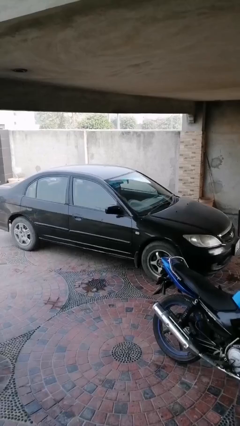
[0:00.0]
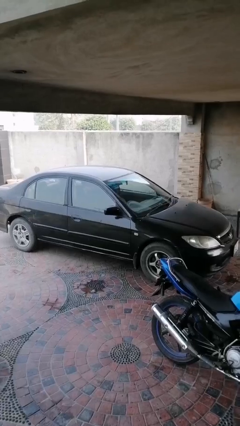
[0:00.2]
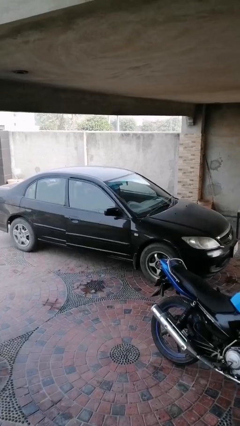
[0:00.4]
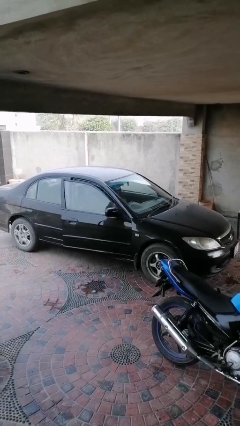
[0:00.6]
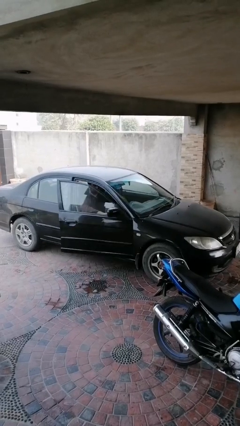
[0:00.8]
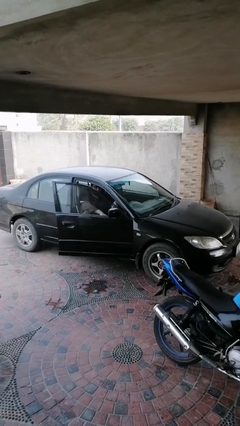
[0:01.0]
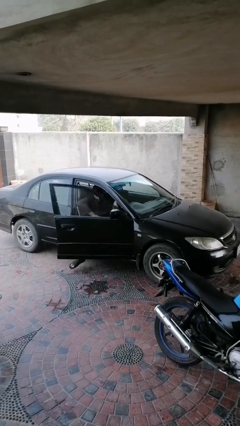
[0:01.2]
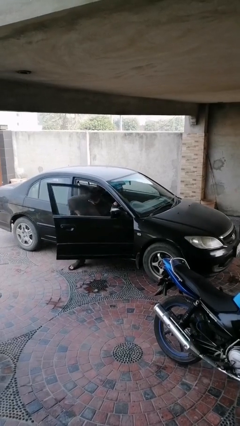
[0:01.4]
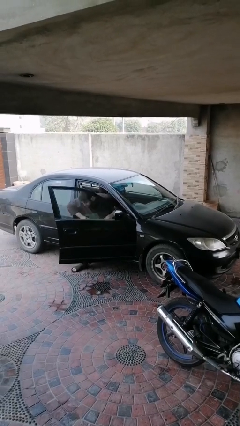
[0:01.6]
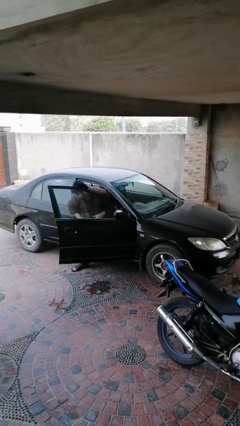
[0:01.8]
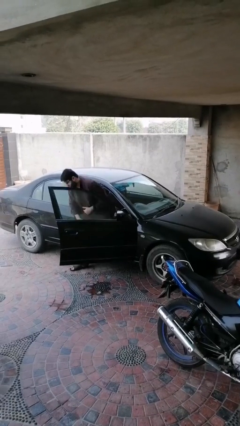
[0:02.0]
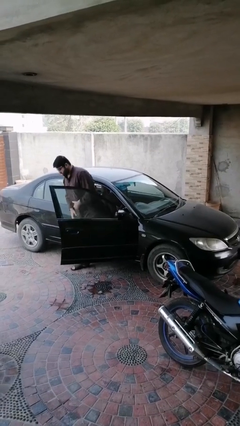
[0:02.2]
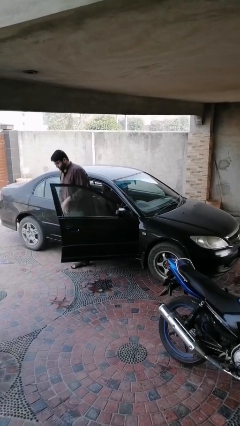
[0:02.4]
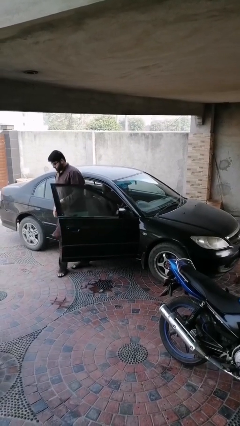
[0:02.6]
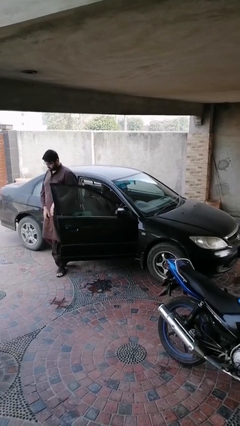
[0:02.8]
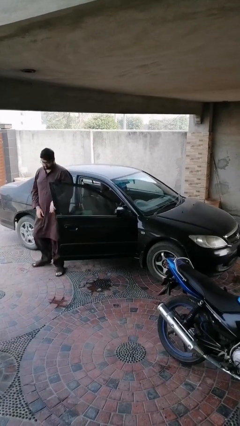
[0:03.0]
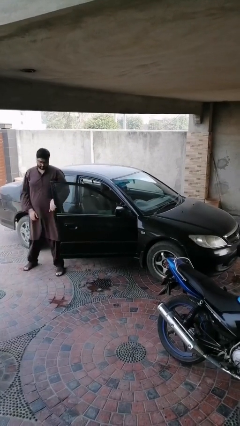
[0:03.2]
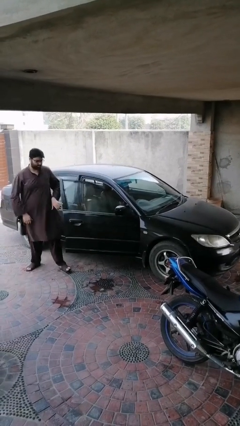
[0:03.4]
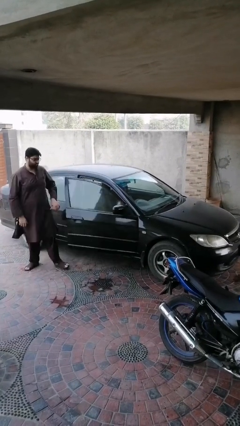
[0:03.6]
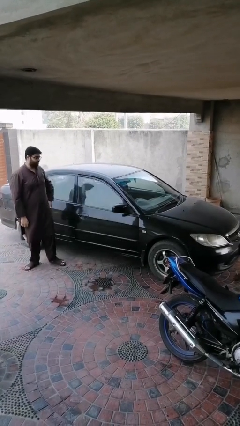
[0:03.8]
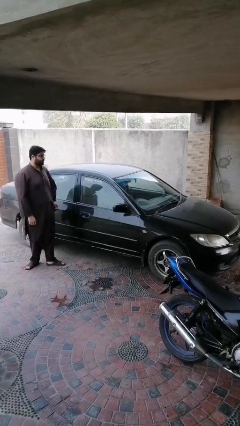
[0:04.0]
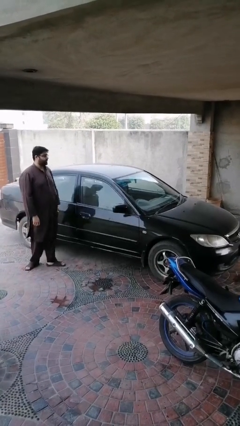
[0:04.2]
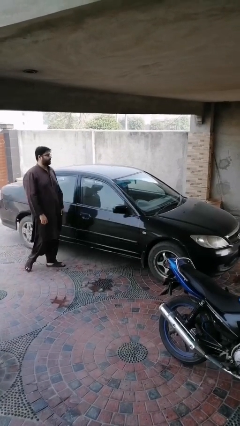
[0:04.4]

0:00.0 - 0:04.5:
car drops off person

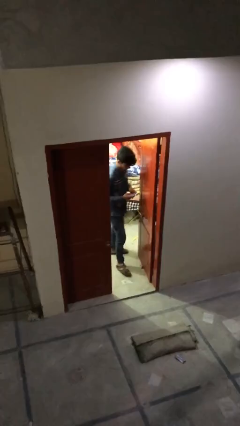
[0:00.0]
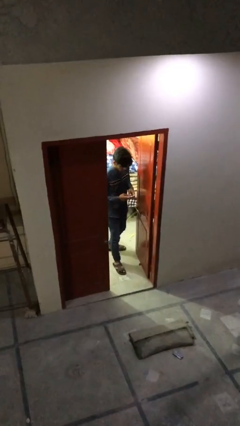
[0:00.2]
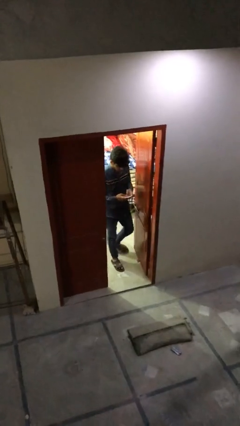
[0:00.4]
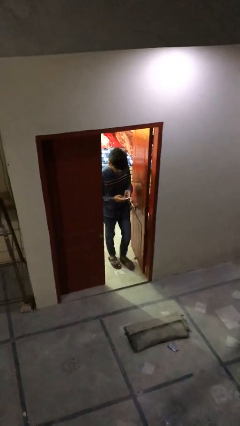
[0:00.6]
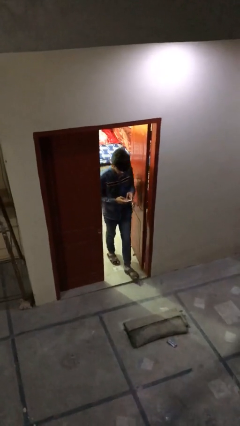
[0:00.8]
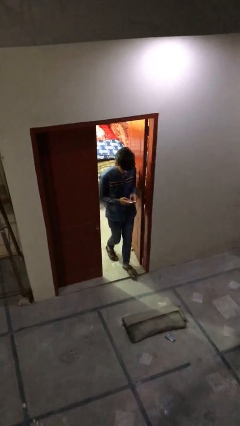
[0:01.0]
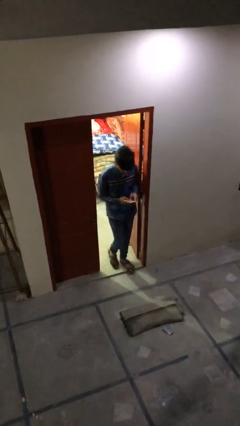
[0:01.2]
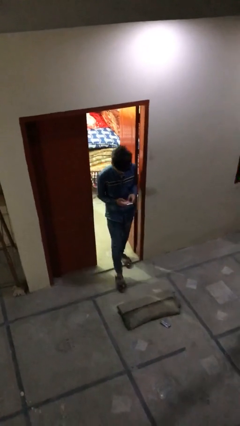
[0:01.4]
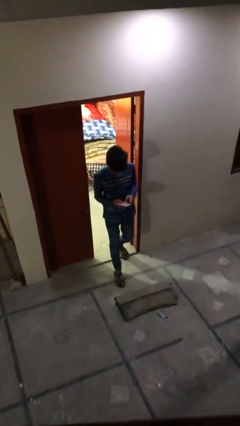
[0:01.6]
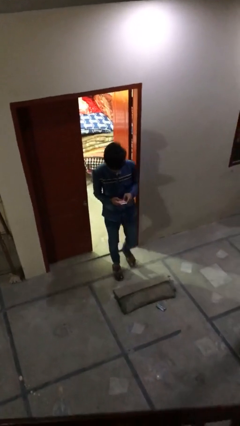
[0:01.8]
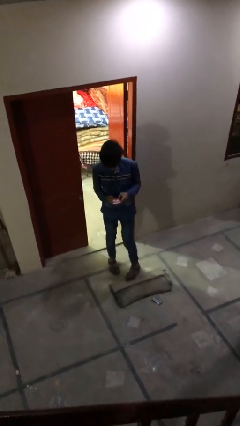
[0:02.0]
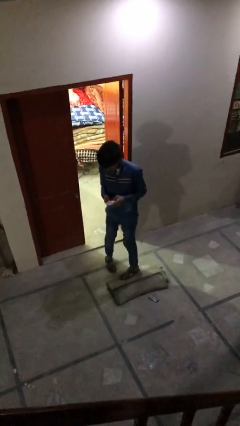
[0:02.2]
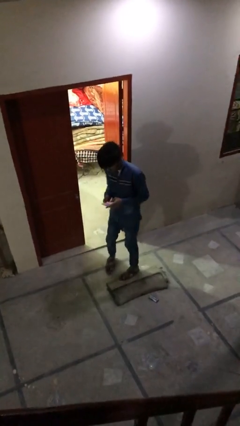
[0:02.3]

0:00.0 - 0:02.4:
person enters scene through structure

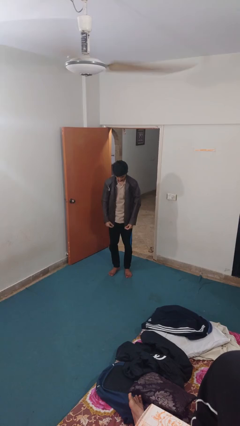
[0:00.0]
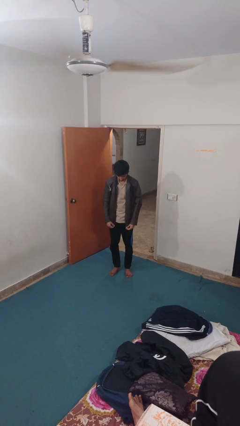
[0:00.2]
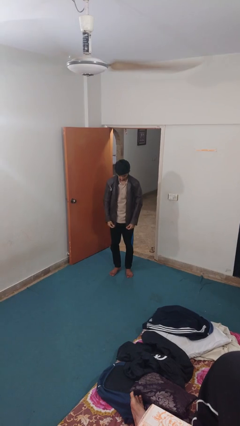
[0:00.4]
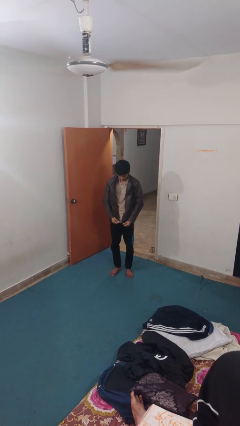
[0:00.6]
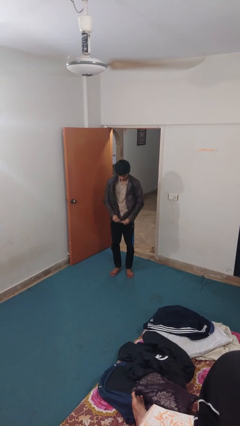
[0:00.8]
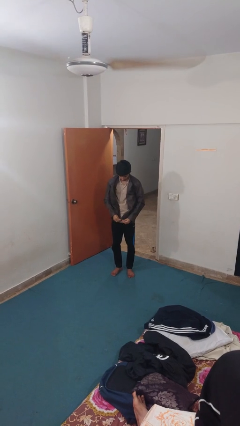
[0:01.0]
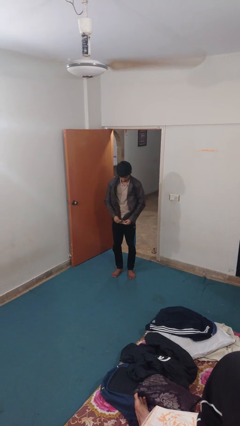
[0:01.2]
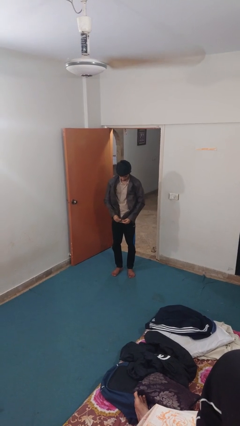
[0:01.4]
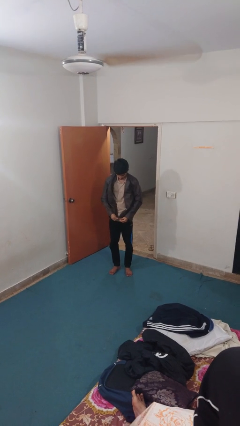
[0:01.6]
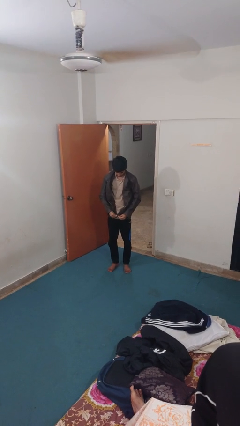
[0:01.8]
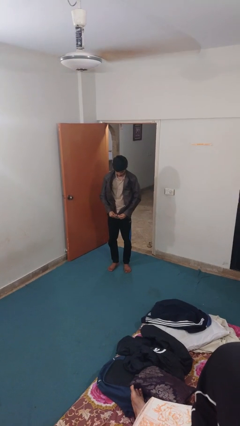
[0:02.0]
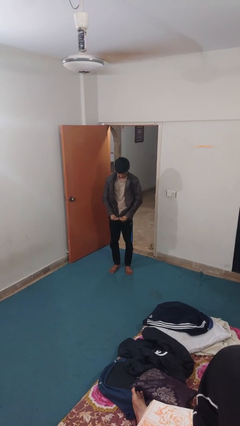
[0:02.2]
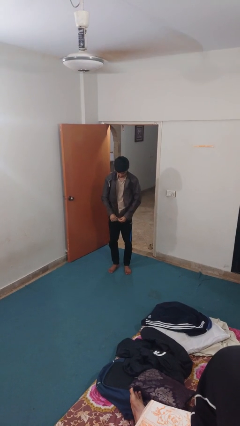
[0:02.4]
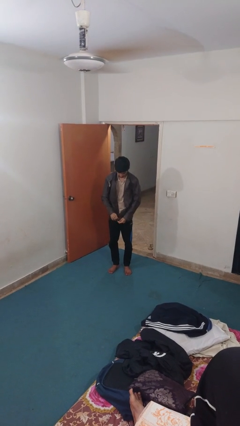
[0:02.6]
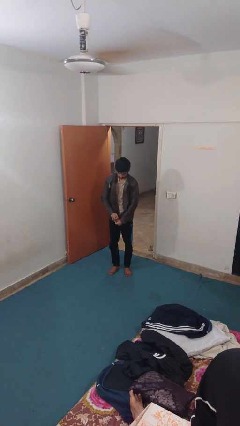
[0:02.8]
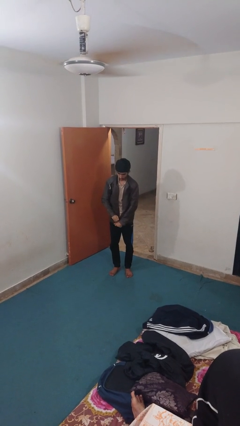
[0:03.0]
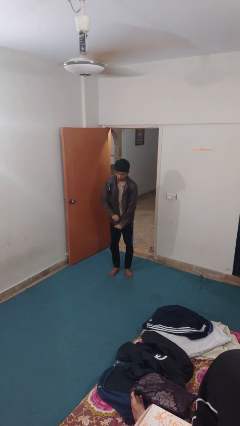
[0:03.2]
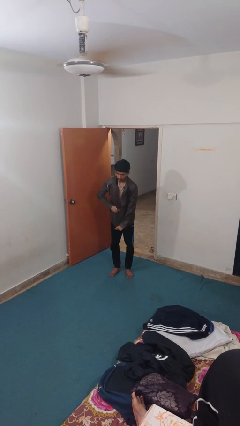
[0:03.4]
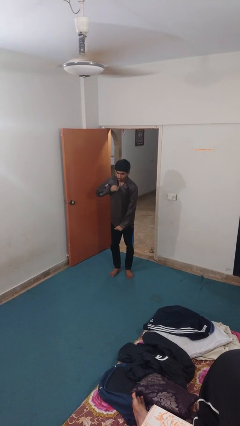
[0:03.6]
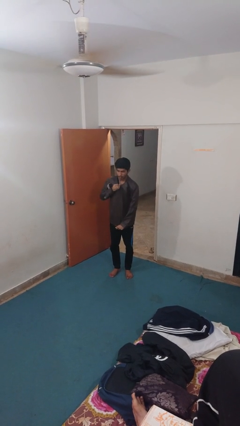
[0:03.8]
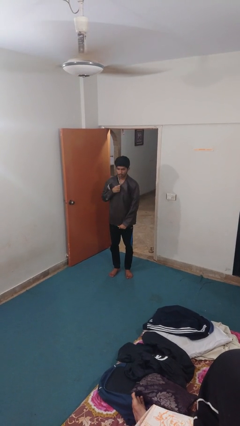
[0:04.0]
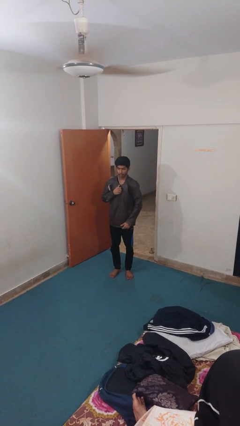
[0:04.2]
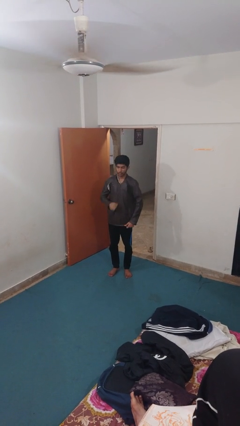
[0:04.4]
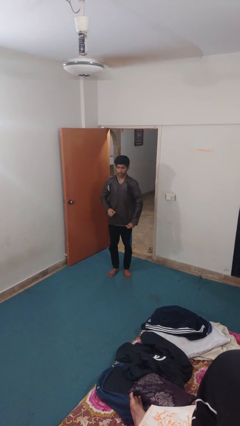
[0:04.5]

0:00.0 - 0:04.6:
person zips up jacket

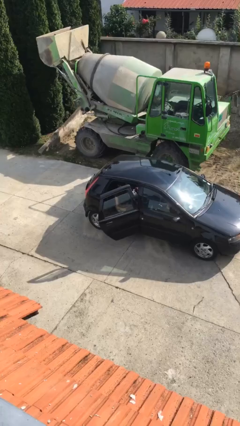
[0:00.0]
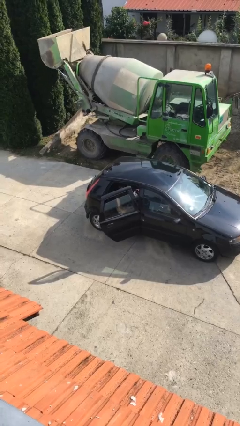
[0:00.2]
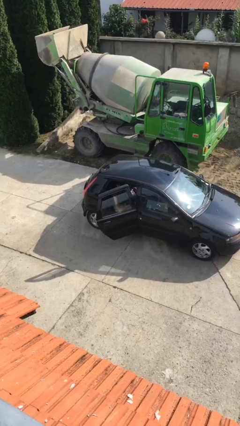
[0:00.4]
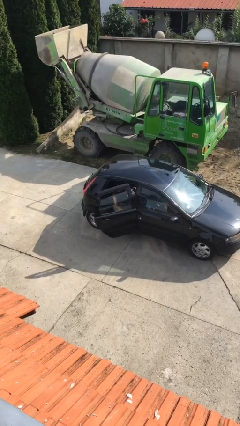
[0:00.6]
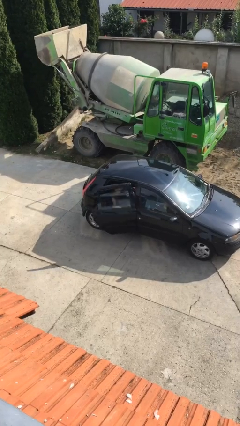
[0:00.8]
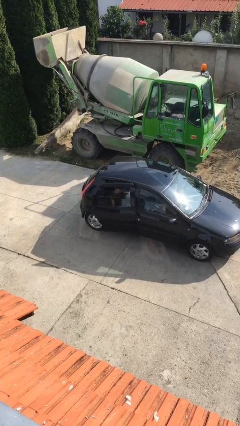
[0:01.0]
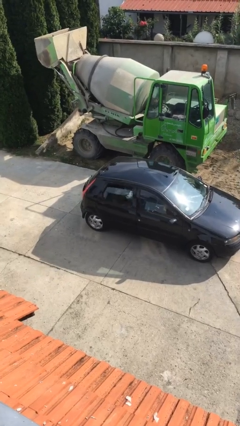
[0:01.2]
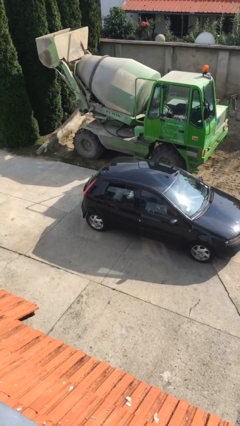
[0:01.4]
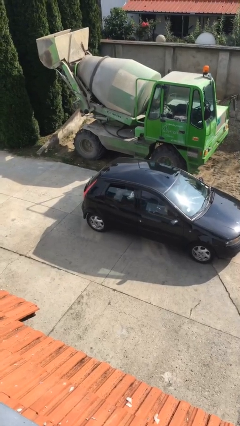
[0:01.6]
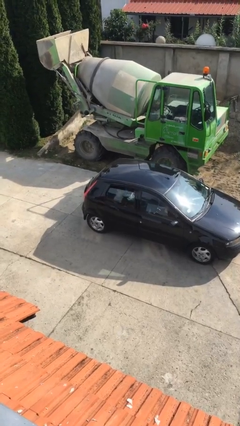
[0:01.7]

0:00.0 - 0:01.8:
person closes car door

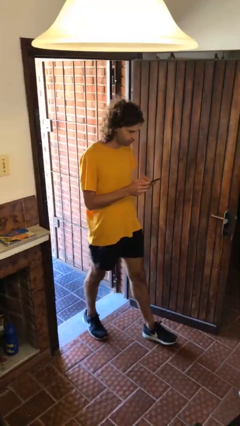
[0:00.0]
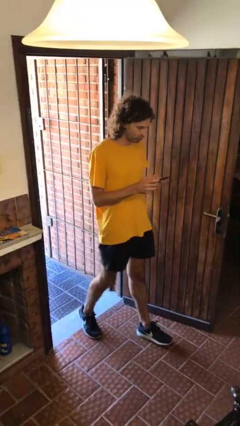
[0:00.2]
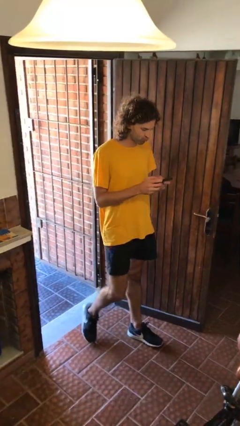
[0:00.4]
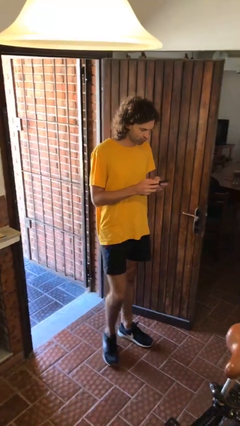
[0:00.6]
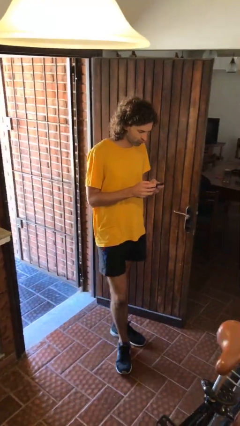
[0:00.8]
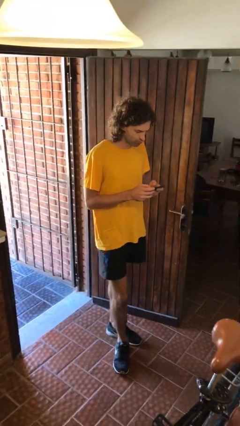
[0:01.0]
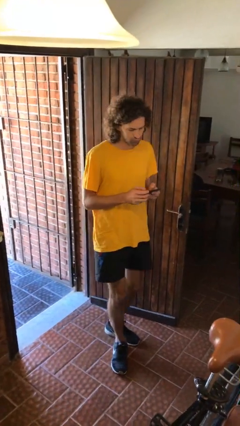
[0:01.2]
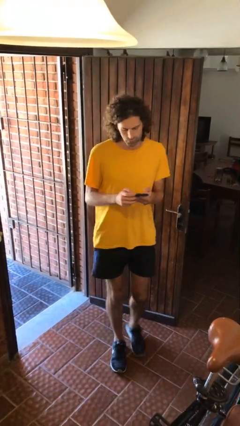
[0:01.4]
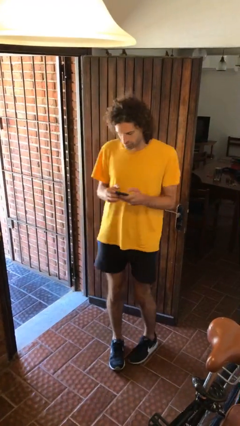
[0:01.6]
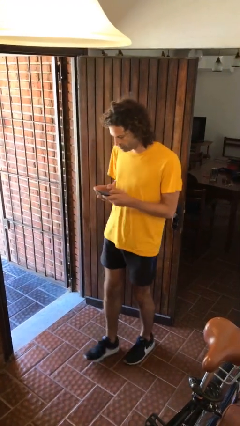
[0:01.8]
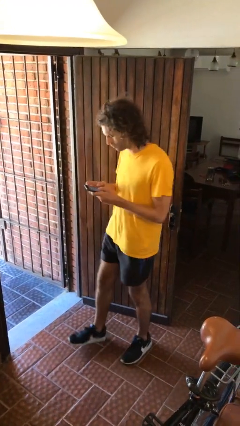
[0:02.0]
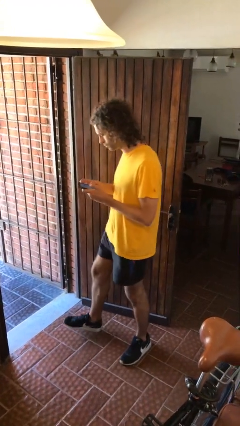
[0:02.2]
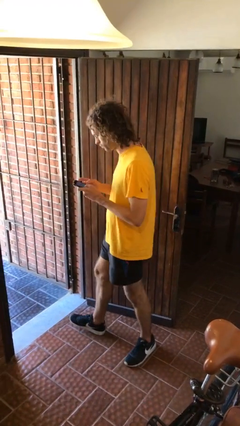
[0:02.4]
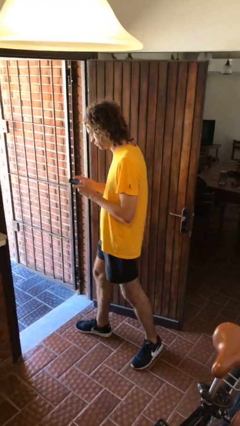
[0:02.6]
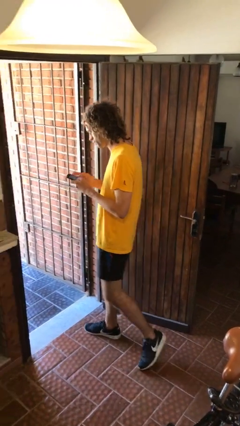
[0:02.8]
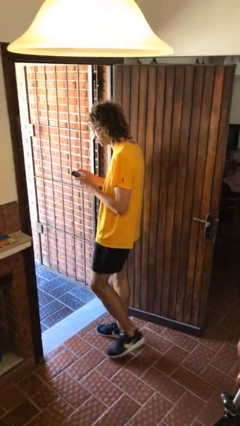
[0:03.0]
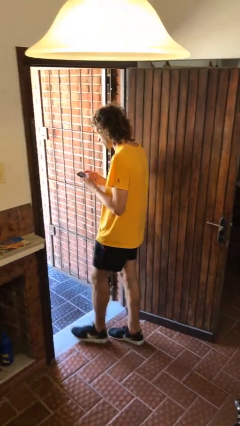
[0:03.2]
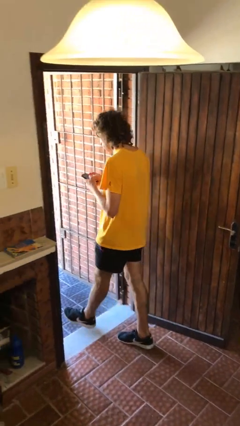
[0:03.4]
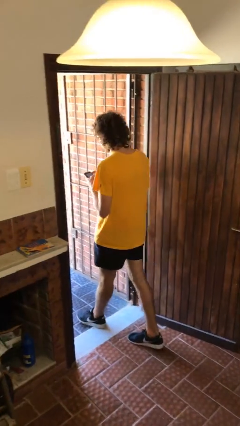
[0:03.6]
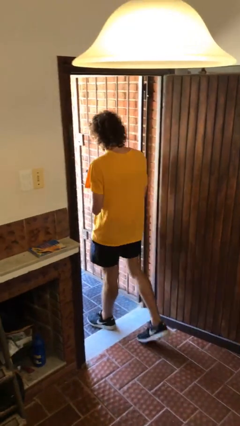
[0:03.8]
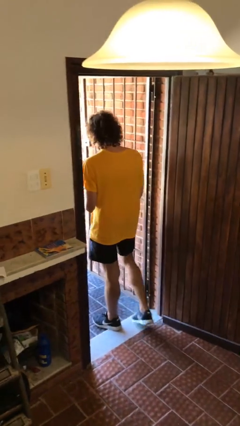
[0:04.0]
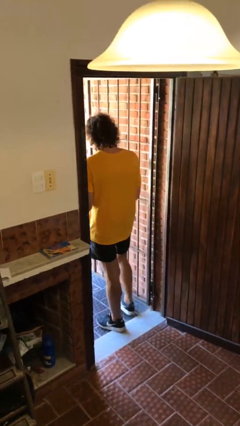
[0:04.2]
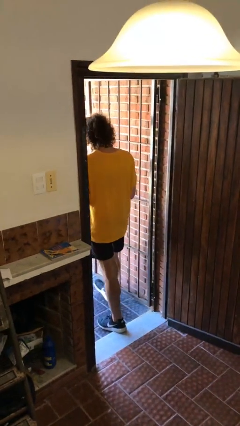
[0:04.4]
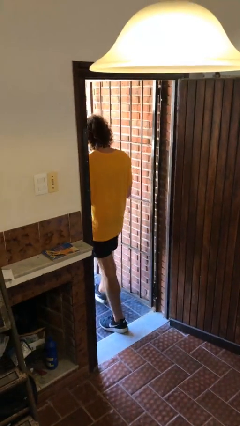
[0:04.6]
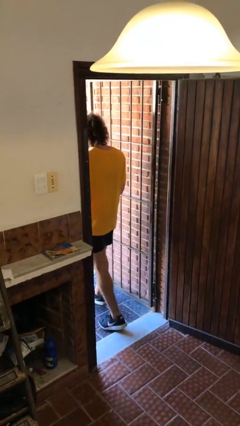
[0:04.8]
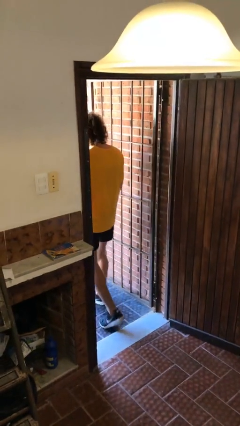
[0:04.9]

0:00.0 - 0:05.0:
person exits scene through structure
